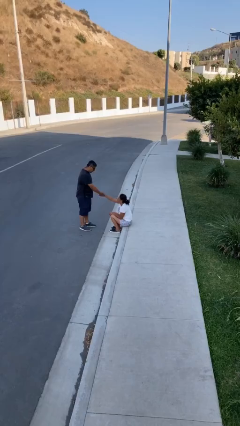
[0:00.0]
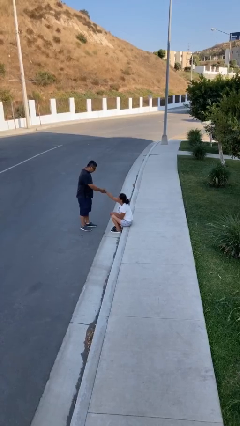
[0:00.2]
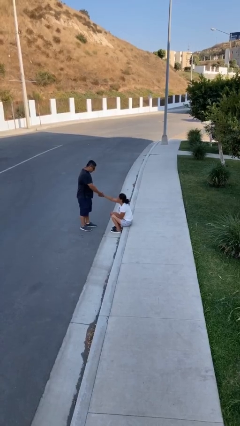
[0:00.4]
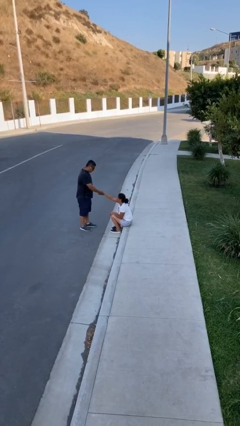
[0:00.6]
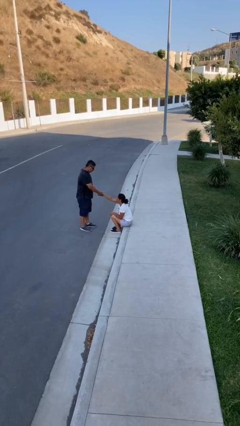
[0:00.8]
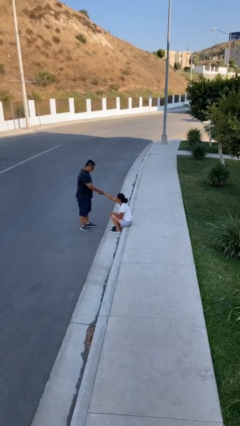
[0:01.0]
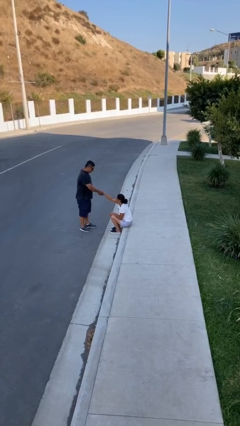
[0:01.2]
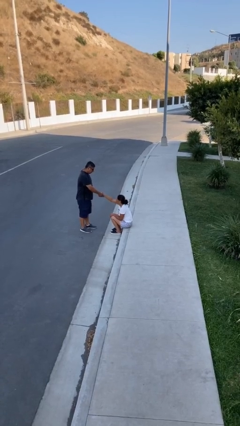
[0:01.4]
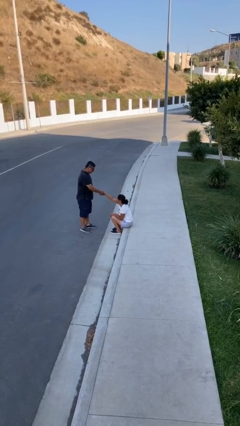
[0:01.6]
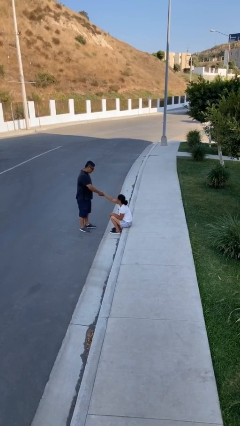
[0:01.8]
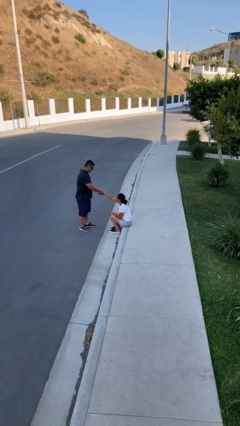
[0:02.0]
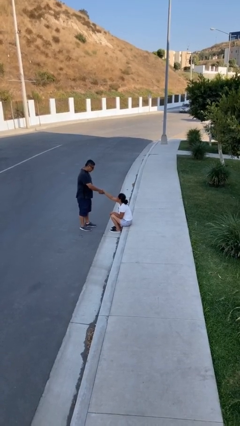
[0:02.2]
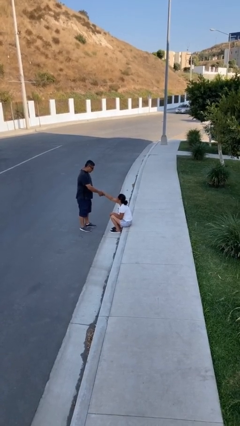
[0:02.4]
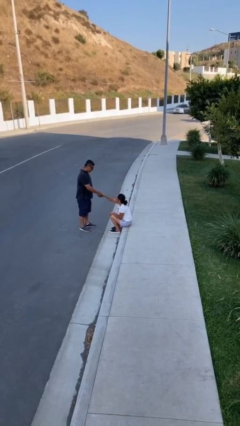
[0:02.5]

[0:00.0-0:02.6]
person shakes hand

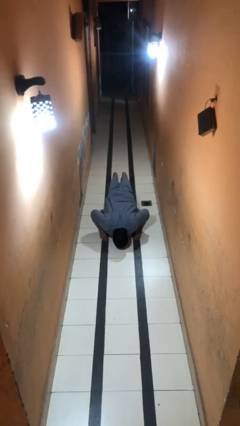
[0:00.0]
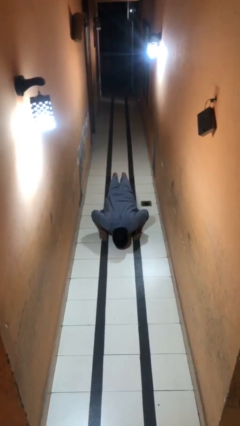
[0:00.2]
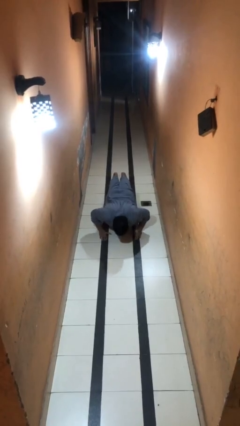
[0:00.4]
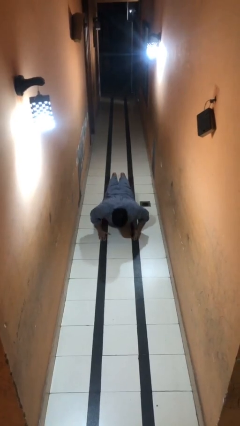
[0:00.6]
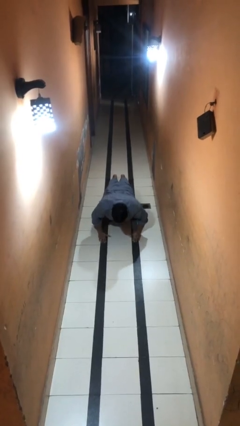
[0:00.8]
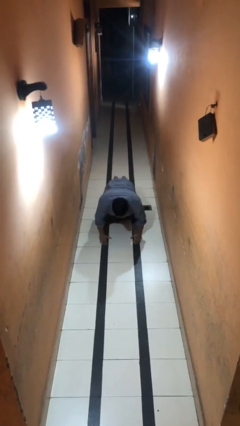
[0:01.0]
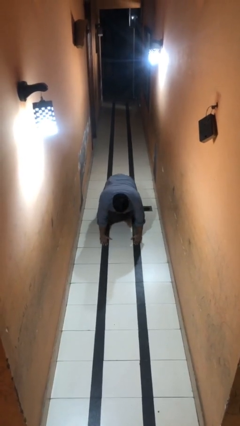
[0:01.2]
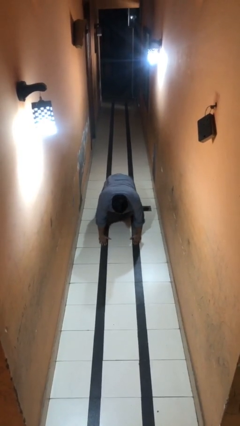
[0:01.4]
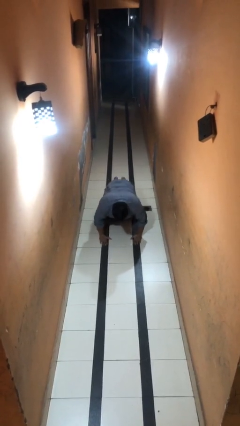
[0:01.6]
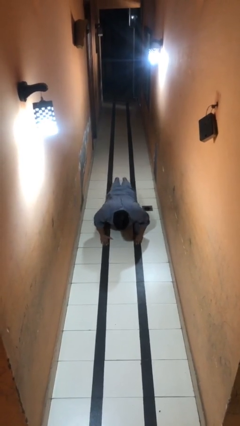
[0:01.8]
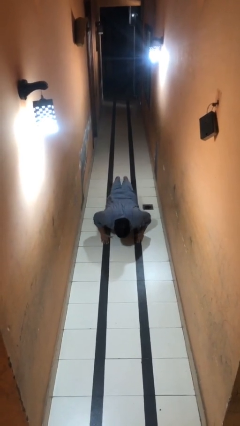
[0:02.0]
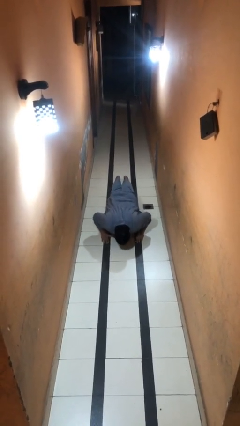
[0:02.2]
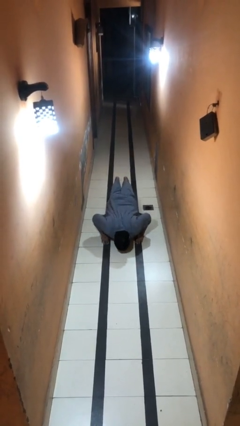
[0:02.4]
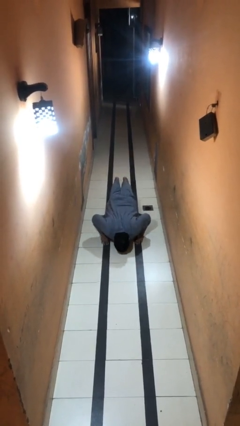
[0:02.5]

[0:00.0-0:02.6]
person exercises with pushup

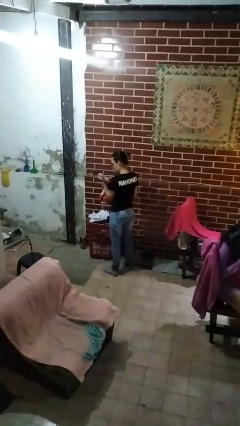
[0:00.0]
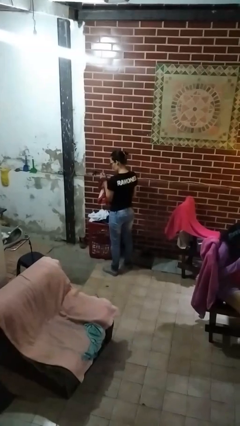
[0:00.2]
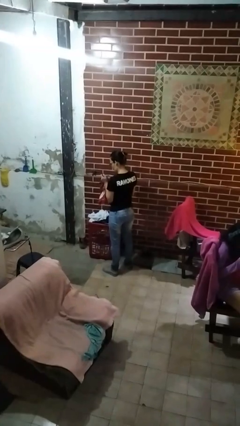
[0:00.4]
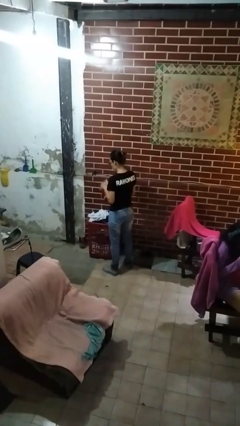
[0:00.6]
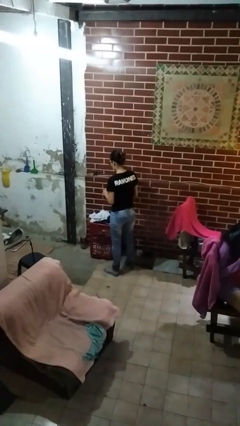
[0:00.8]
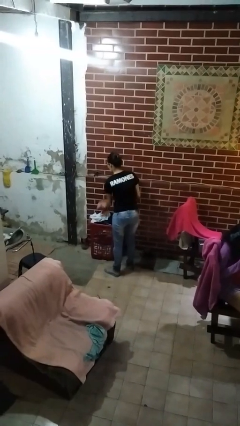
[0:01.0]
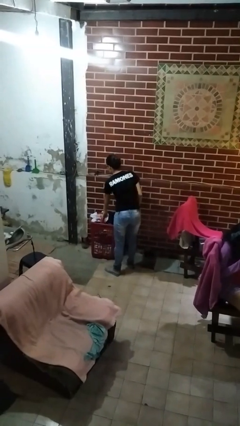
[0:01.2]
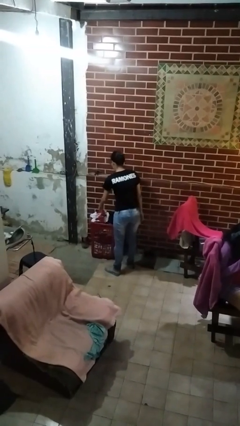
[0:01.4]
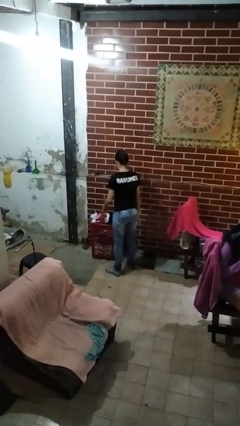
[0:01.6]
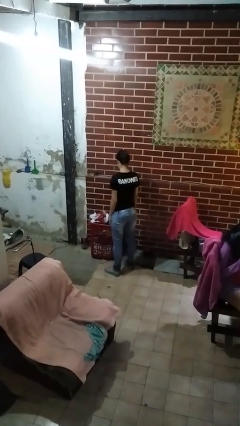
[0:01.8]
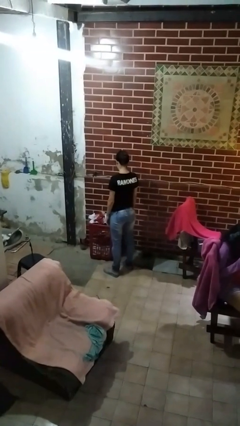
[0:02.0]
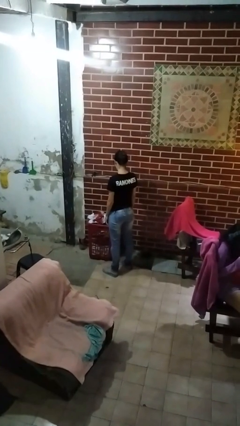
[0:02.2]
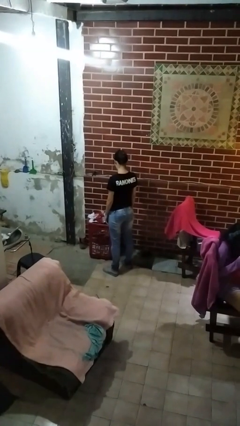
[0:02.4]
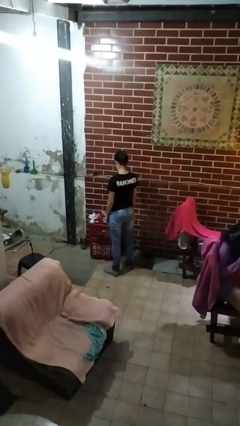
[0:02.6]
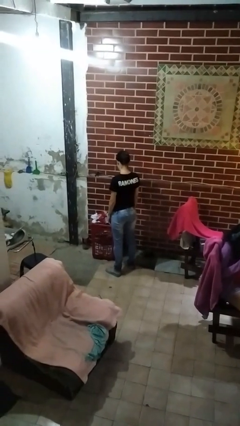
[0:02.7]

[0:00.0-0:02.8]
person puts object into basket

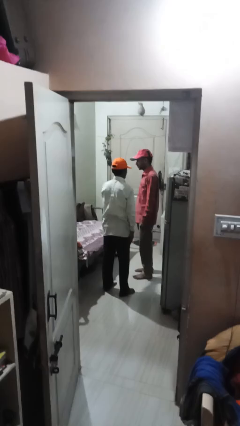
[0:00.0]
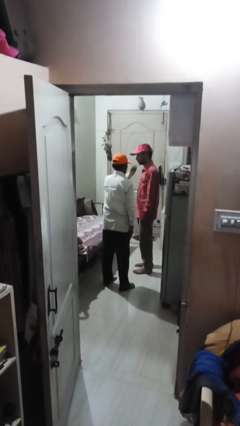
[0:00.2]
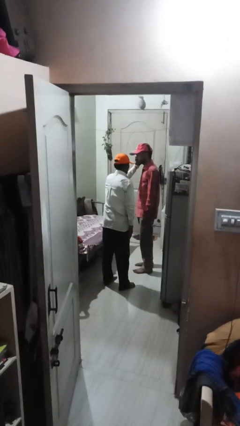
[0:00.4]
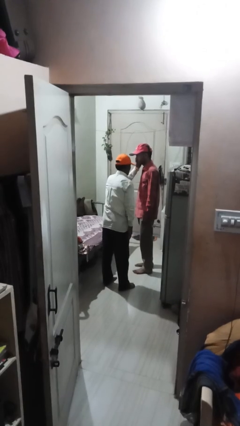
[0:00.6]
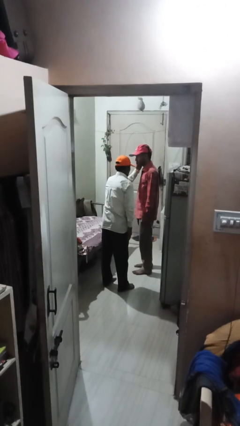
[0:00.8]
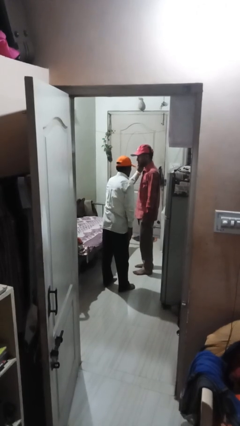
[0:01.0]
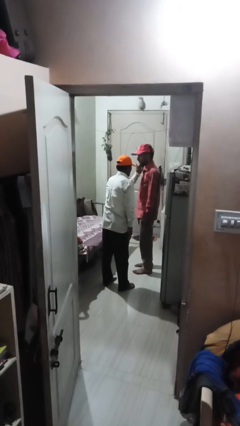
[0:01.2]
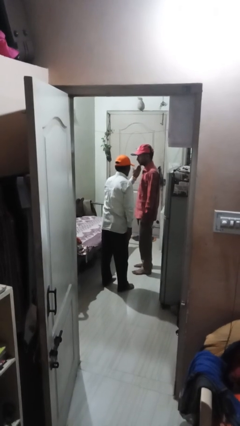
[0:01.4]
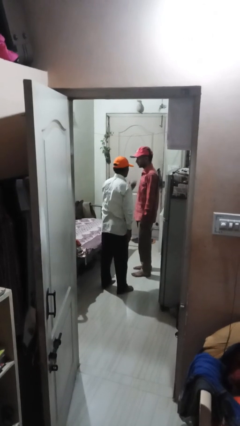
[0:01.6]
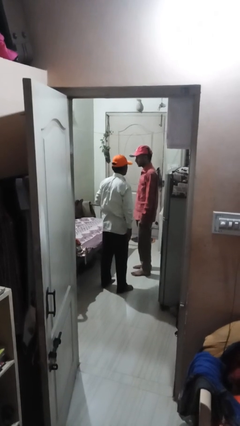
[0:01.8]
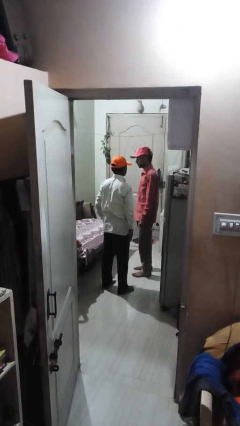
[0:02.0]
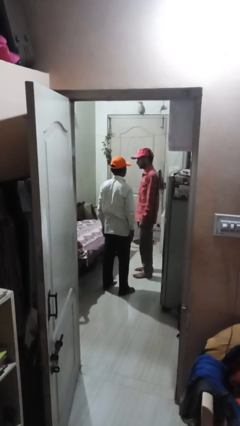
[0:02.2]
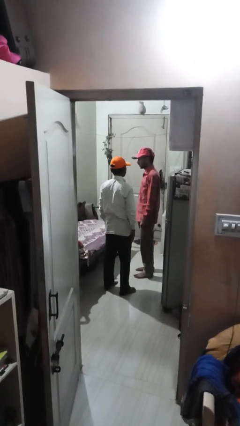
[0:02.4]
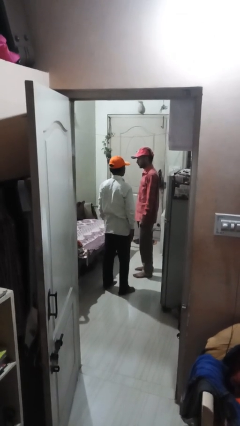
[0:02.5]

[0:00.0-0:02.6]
person touches face of person

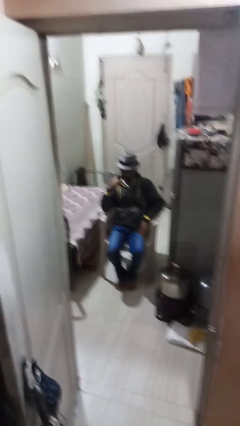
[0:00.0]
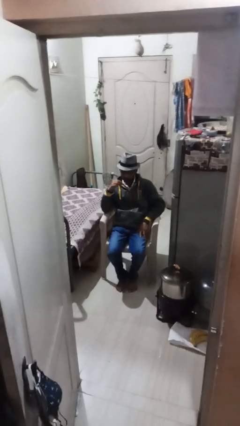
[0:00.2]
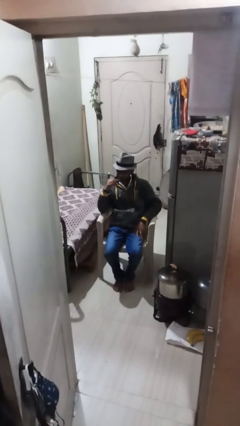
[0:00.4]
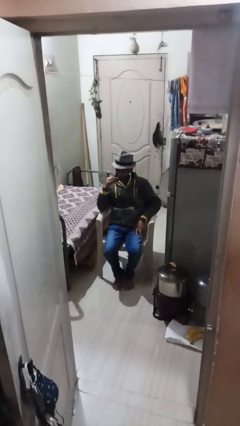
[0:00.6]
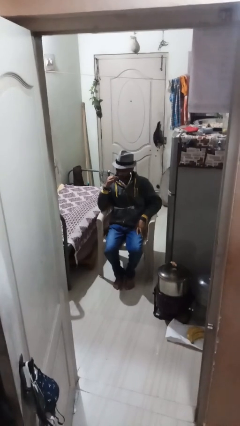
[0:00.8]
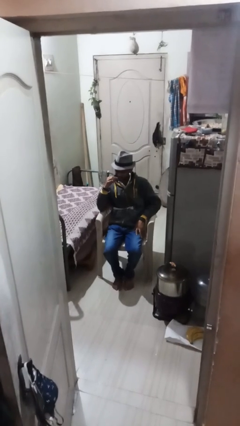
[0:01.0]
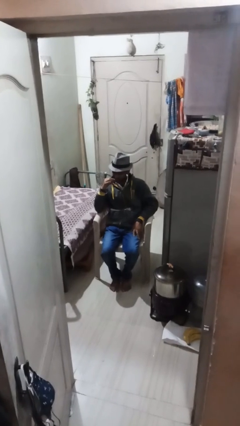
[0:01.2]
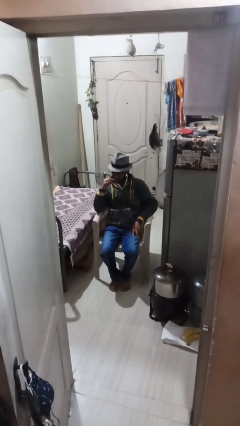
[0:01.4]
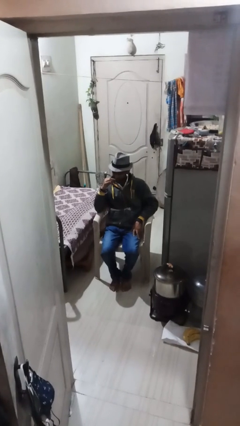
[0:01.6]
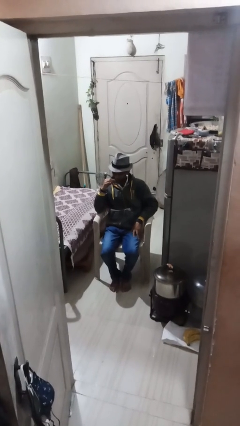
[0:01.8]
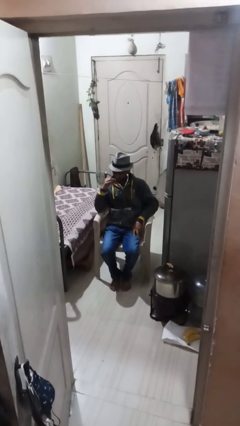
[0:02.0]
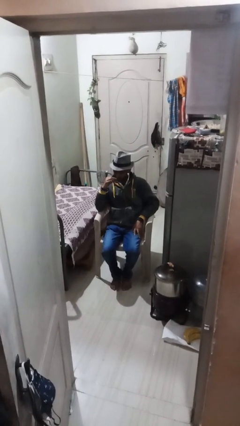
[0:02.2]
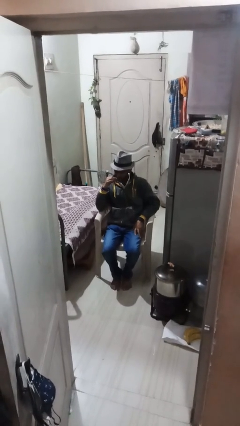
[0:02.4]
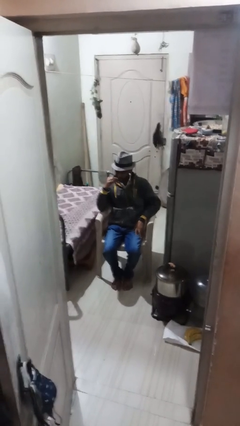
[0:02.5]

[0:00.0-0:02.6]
person flosses

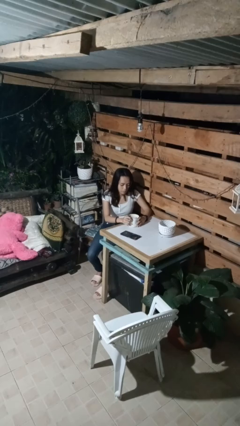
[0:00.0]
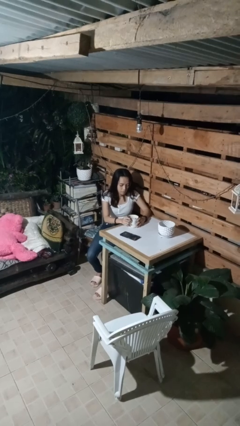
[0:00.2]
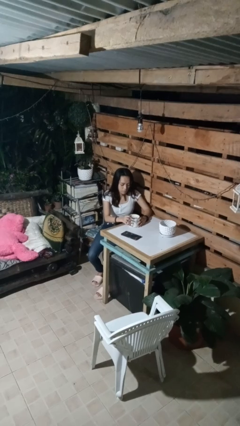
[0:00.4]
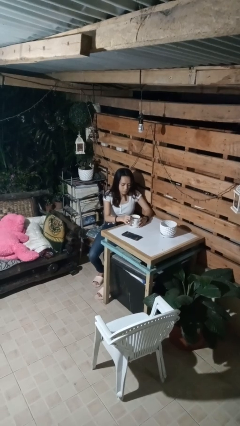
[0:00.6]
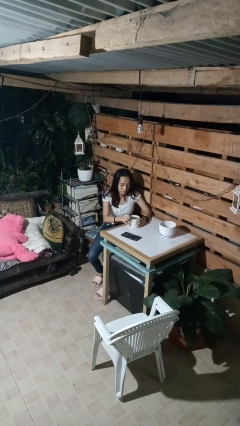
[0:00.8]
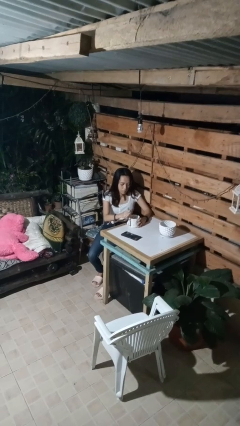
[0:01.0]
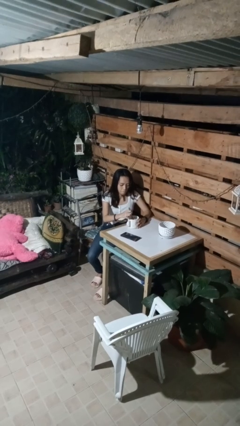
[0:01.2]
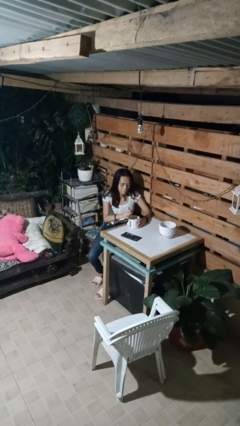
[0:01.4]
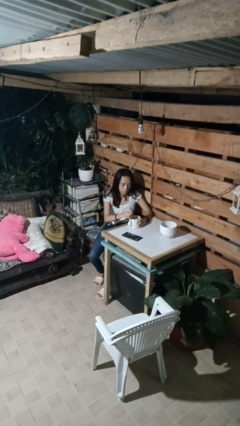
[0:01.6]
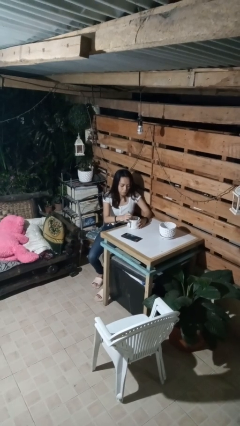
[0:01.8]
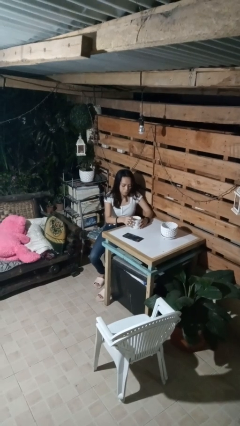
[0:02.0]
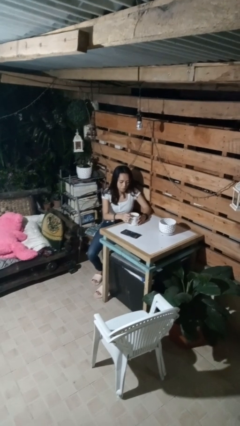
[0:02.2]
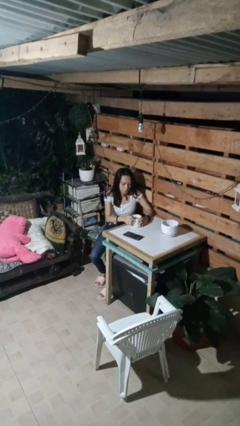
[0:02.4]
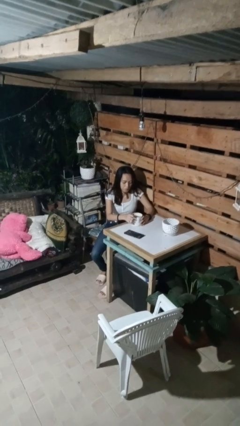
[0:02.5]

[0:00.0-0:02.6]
person stirs mug

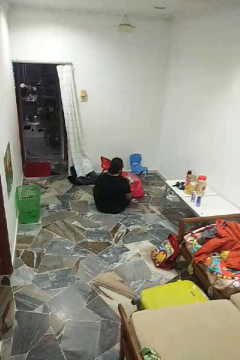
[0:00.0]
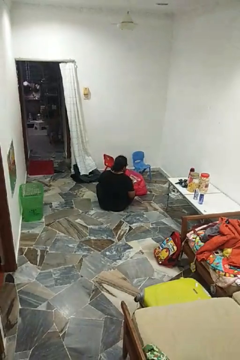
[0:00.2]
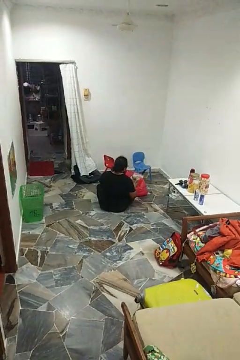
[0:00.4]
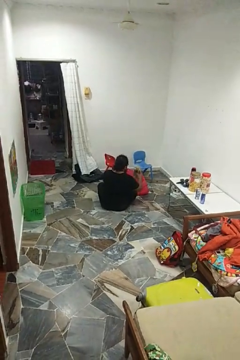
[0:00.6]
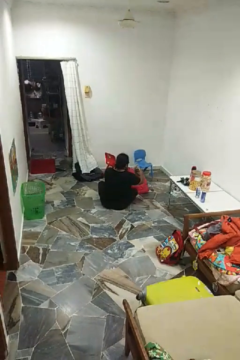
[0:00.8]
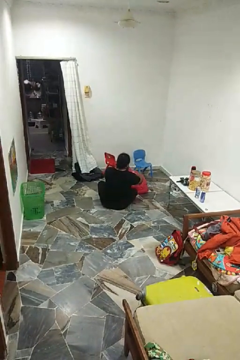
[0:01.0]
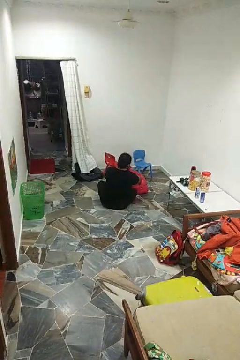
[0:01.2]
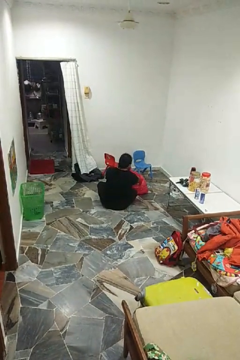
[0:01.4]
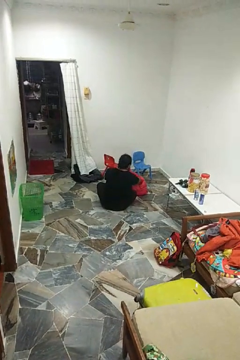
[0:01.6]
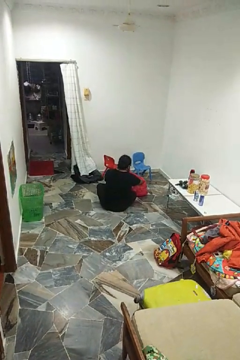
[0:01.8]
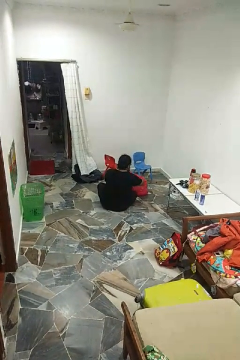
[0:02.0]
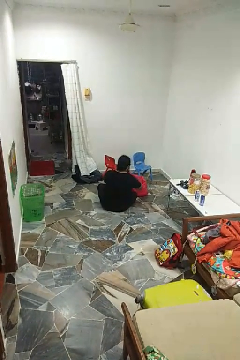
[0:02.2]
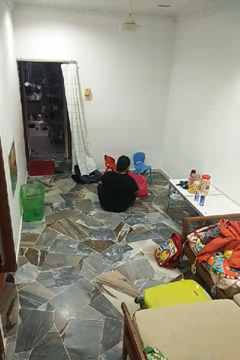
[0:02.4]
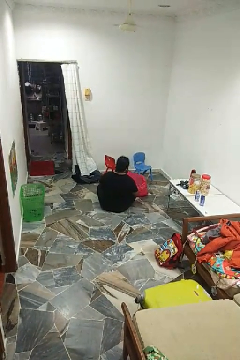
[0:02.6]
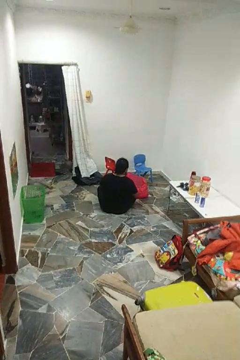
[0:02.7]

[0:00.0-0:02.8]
person puts object into bag
